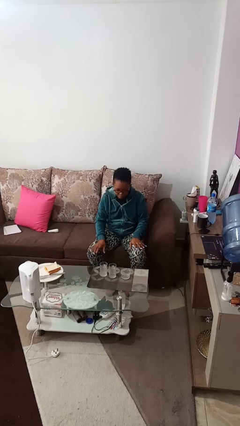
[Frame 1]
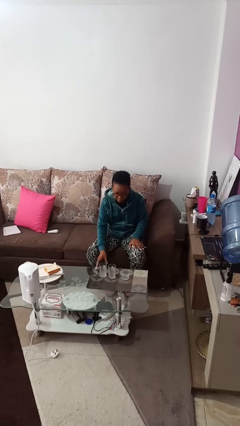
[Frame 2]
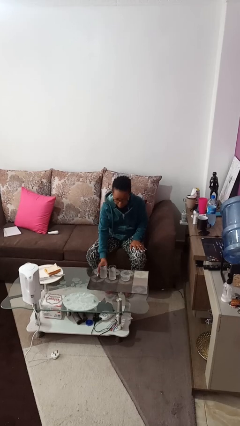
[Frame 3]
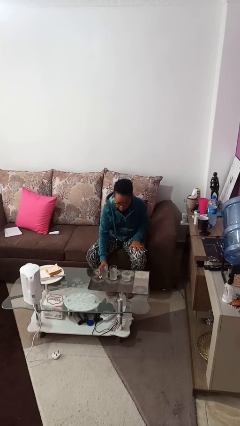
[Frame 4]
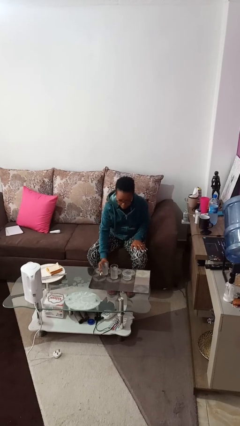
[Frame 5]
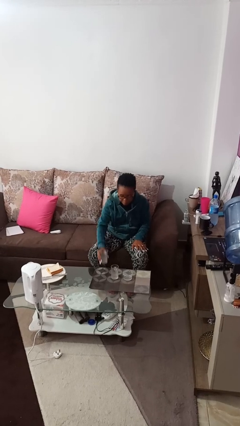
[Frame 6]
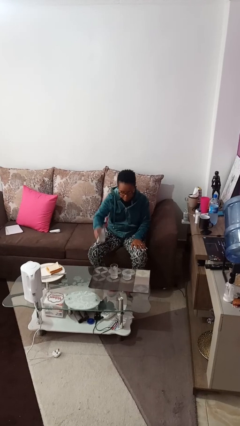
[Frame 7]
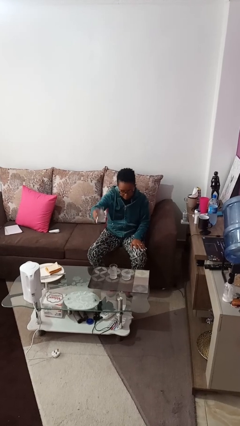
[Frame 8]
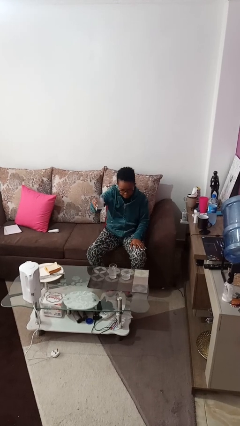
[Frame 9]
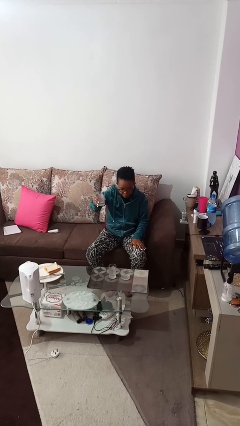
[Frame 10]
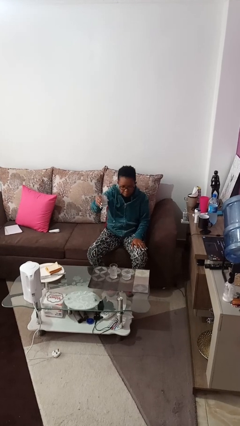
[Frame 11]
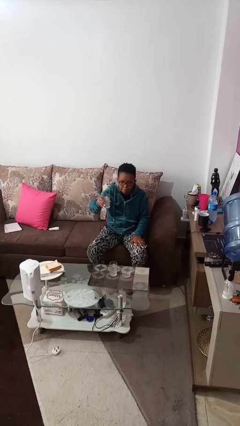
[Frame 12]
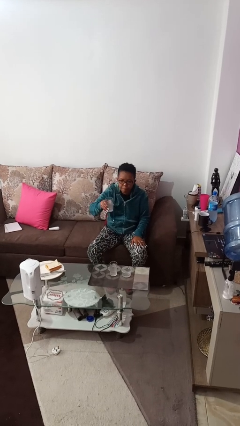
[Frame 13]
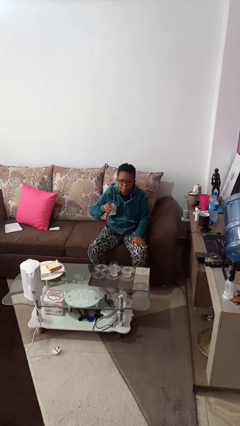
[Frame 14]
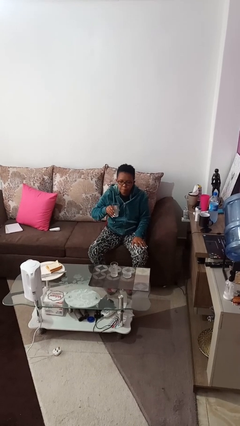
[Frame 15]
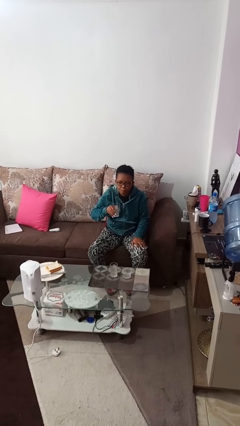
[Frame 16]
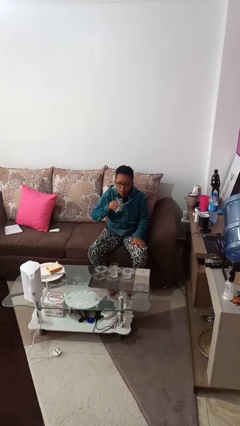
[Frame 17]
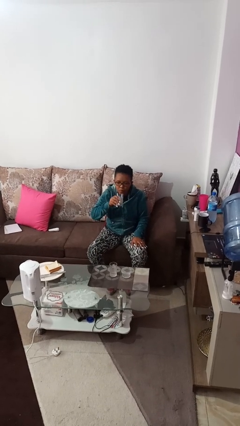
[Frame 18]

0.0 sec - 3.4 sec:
person picks up object from table

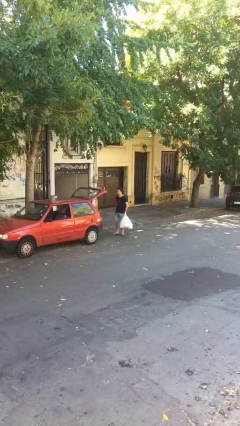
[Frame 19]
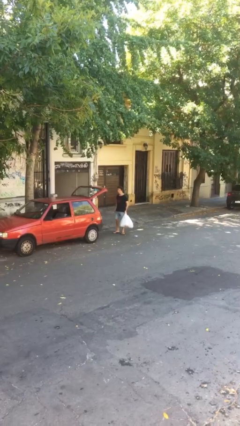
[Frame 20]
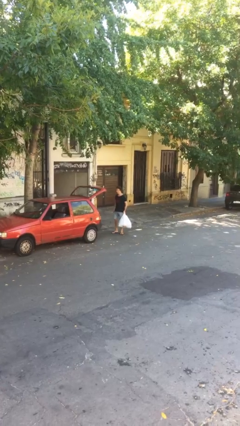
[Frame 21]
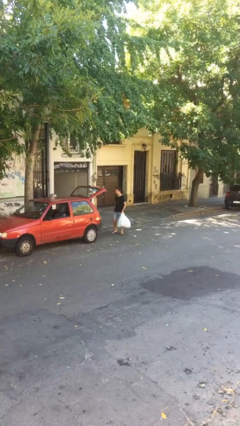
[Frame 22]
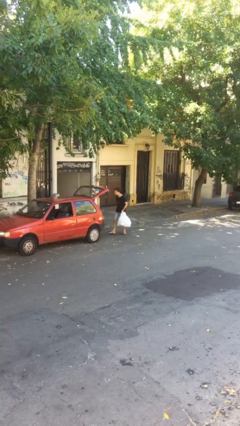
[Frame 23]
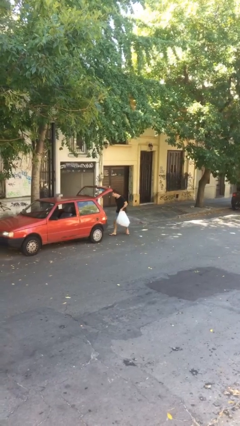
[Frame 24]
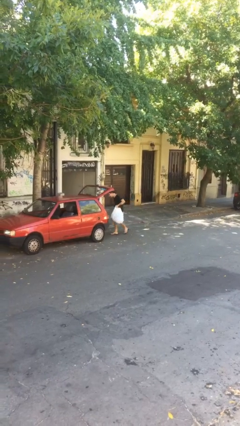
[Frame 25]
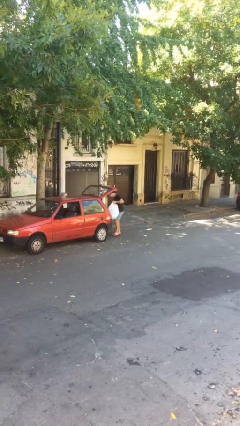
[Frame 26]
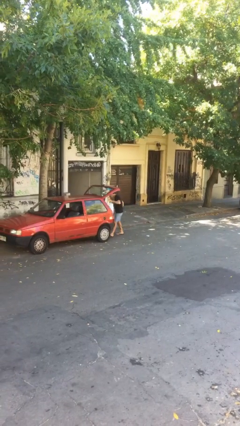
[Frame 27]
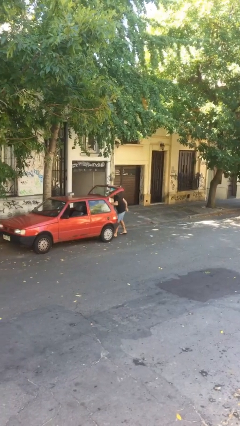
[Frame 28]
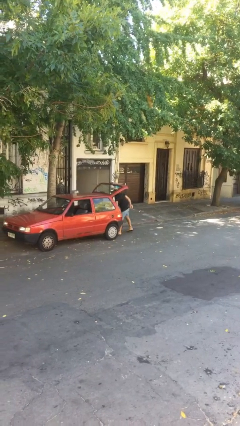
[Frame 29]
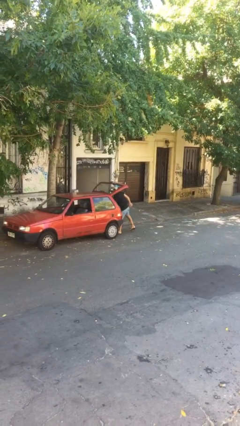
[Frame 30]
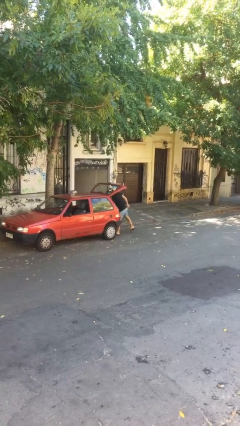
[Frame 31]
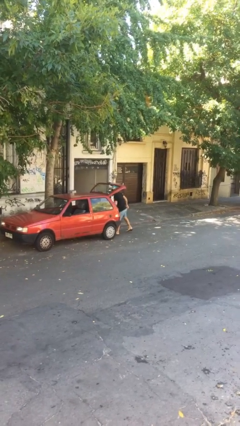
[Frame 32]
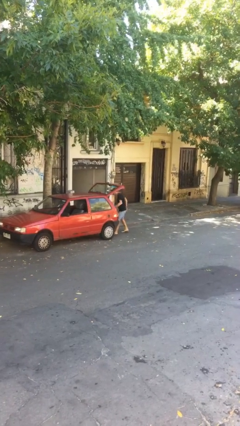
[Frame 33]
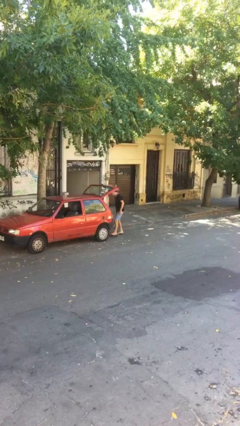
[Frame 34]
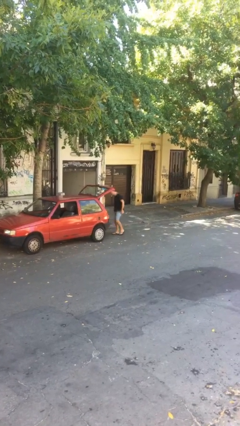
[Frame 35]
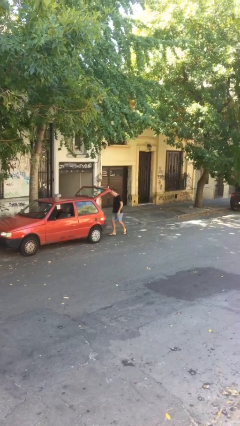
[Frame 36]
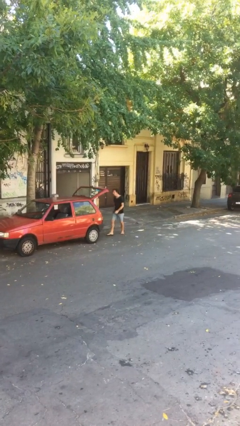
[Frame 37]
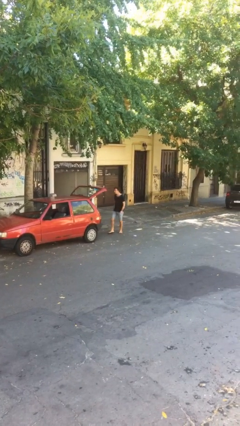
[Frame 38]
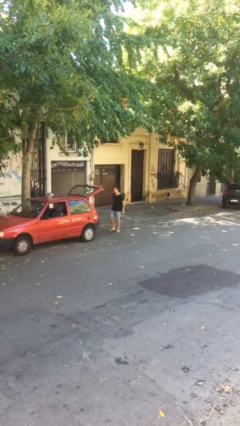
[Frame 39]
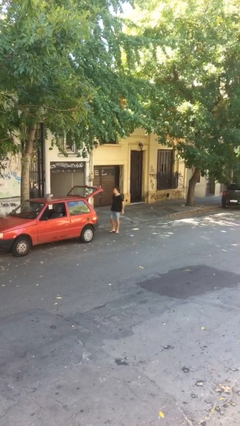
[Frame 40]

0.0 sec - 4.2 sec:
person loads car

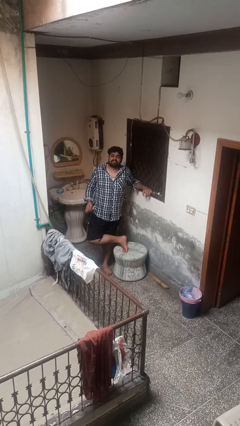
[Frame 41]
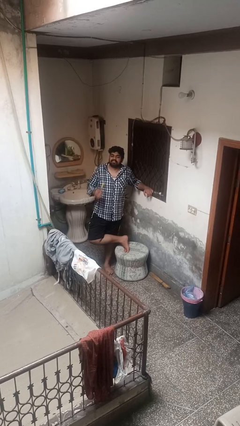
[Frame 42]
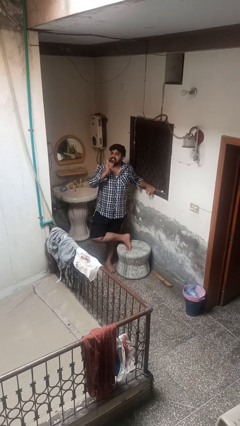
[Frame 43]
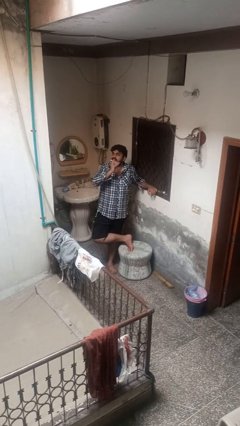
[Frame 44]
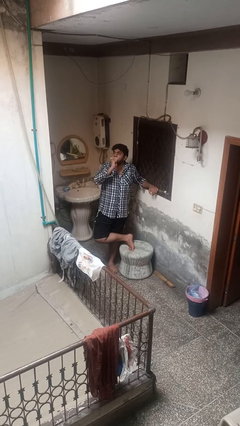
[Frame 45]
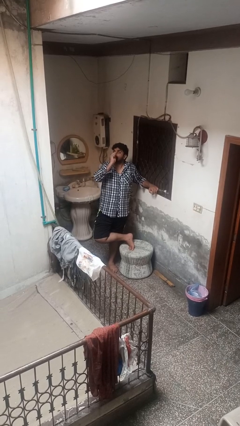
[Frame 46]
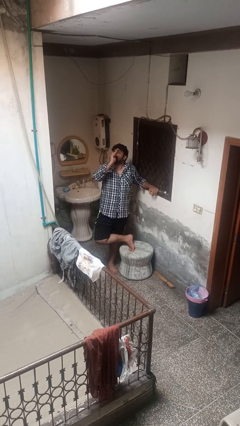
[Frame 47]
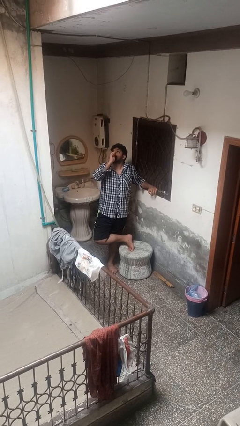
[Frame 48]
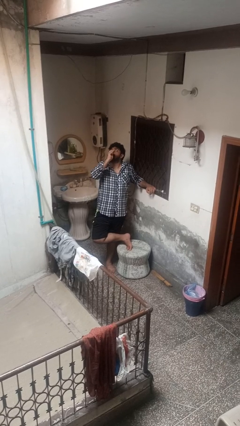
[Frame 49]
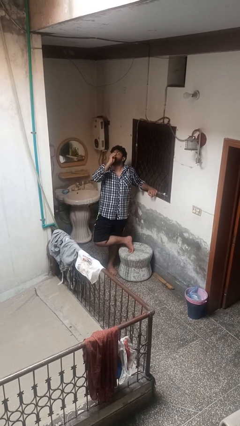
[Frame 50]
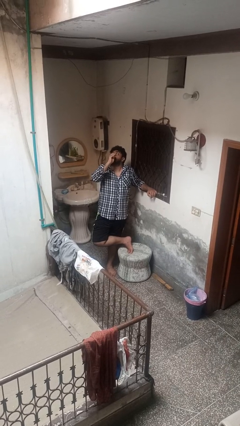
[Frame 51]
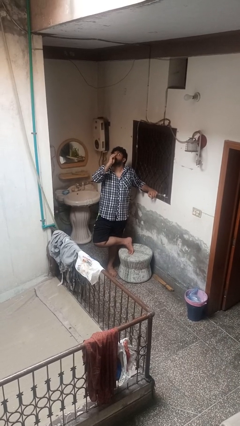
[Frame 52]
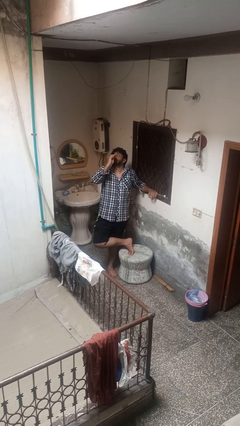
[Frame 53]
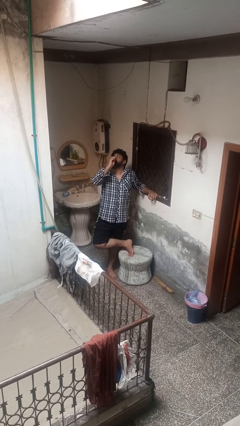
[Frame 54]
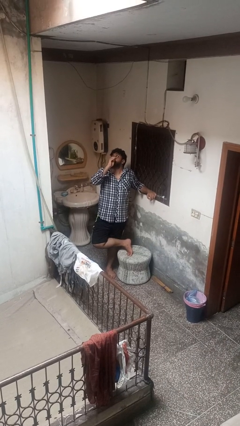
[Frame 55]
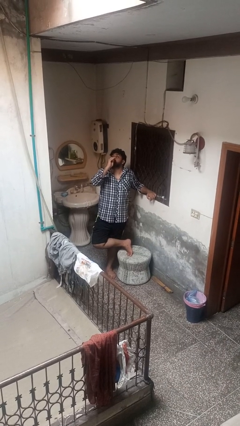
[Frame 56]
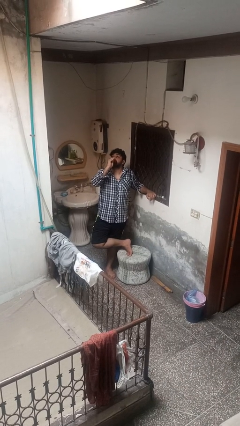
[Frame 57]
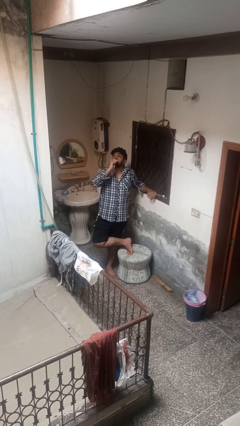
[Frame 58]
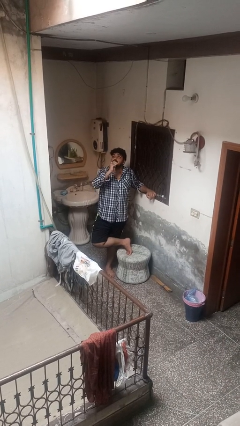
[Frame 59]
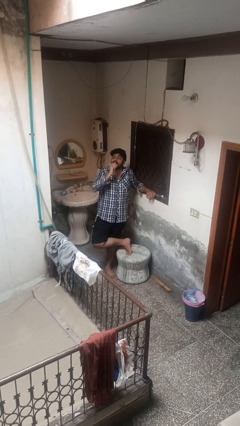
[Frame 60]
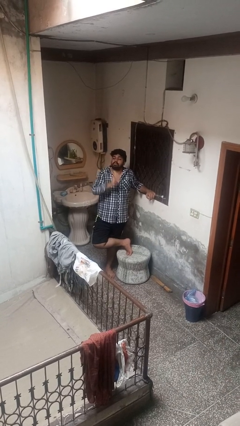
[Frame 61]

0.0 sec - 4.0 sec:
person brushes teeth

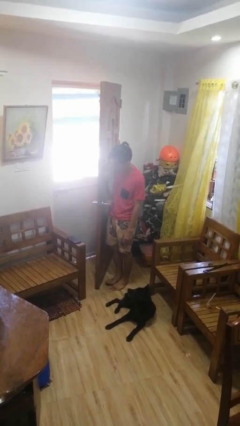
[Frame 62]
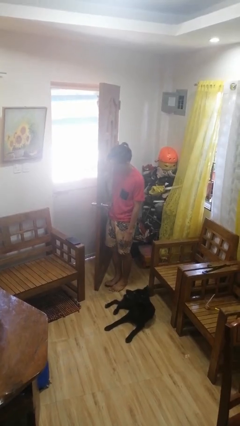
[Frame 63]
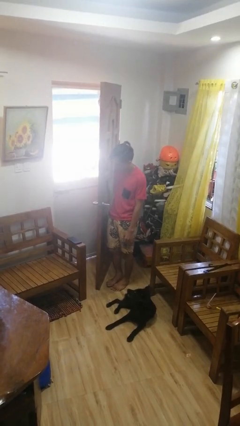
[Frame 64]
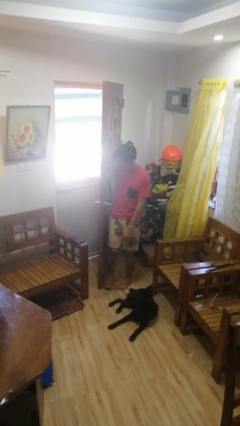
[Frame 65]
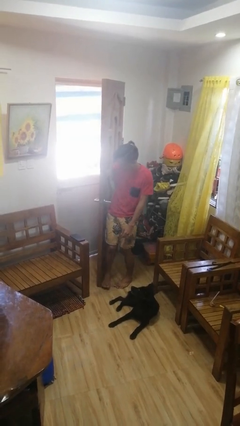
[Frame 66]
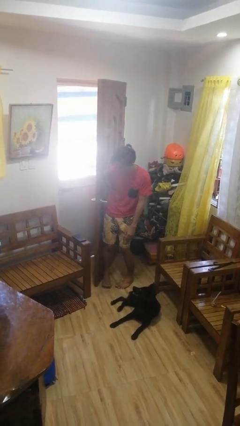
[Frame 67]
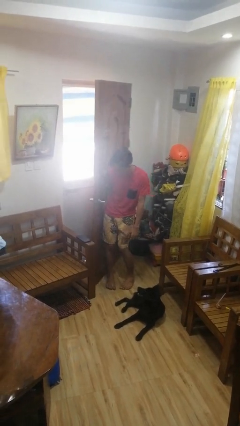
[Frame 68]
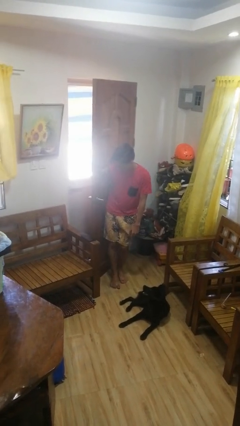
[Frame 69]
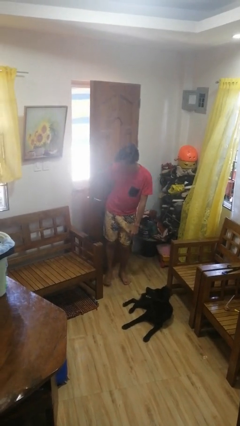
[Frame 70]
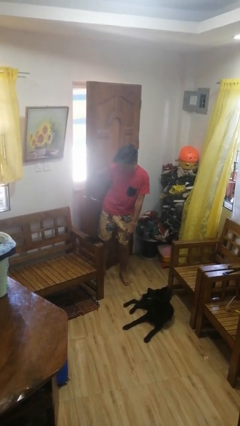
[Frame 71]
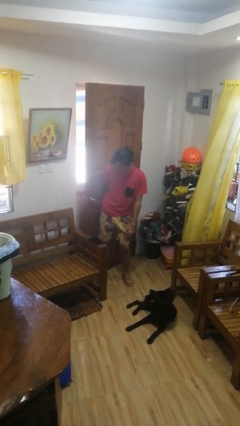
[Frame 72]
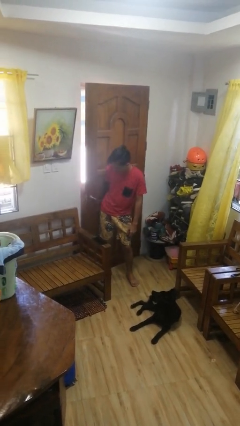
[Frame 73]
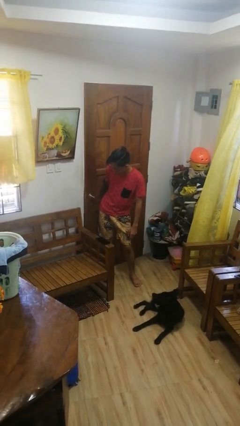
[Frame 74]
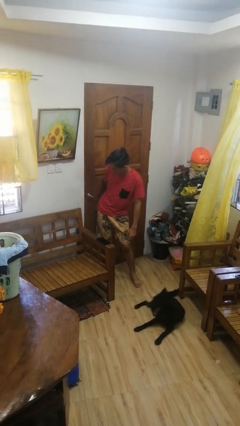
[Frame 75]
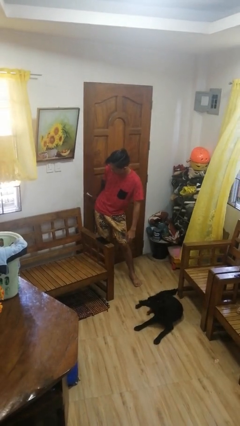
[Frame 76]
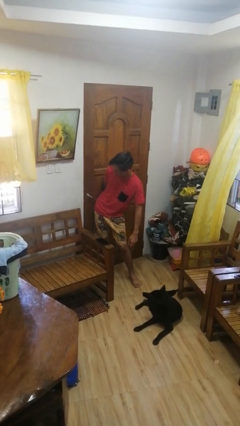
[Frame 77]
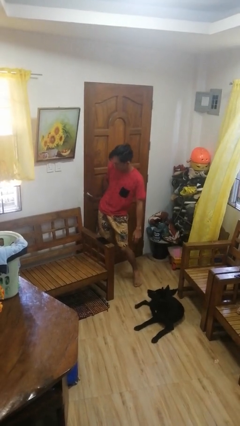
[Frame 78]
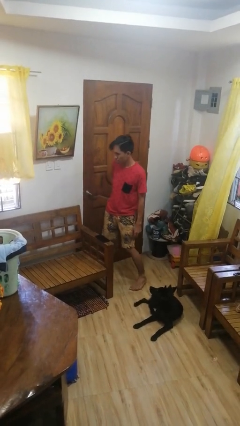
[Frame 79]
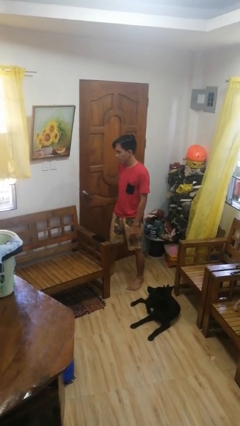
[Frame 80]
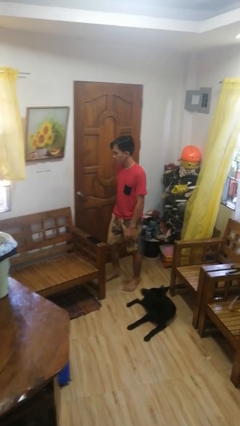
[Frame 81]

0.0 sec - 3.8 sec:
person closes door with hip

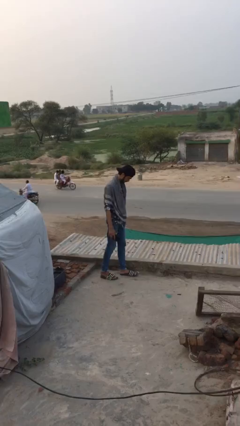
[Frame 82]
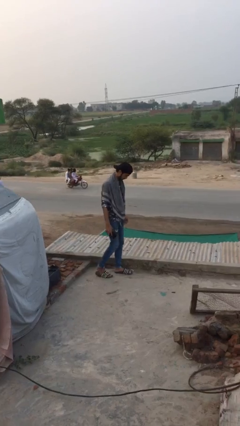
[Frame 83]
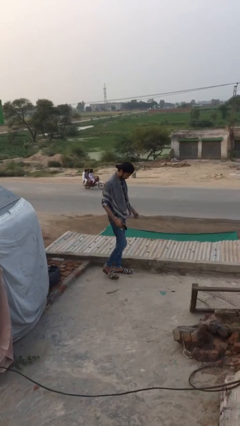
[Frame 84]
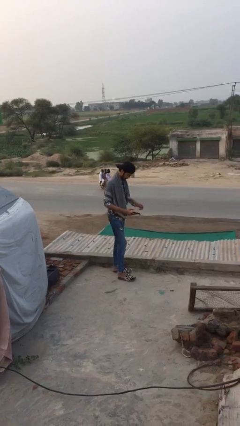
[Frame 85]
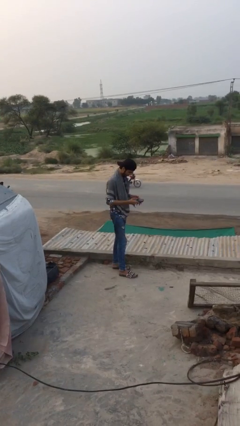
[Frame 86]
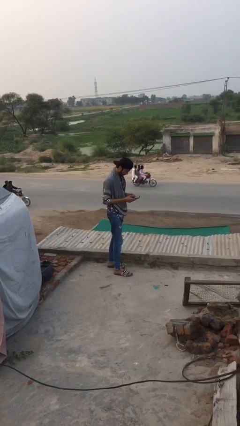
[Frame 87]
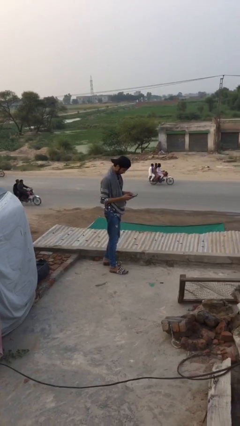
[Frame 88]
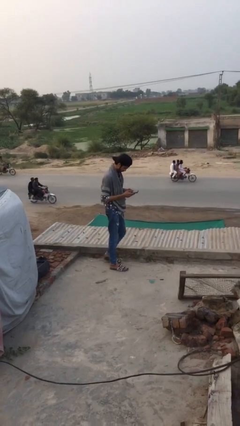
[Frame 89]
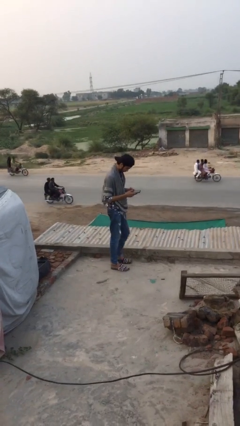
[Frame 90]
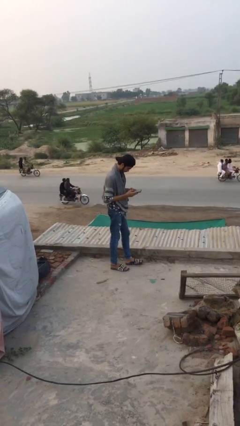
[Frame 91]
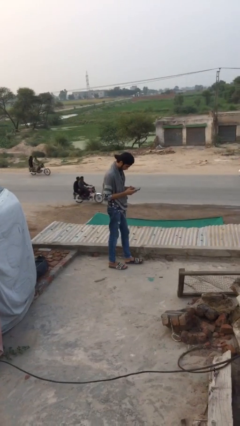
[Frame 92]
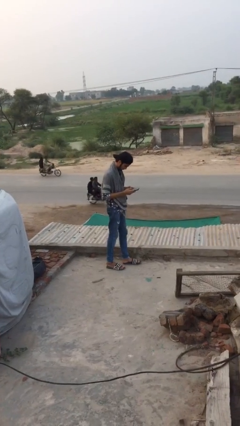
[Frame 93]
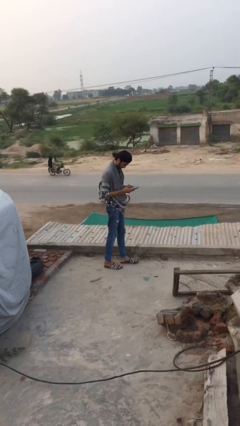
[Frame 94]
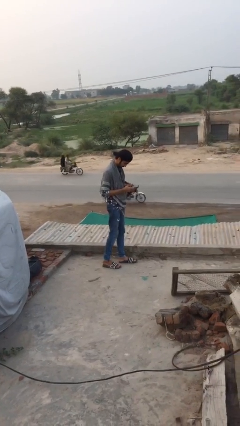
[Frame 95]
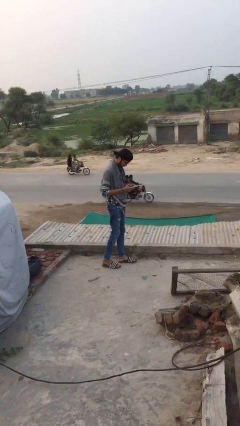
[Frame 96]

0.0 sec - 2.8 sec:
person texts on phone
